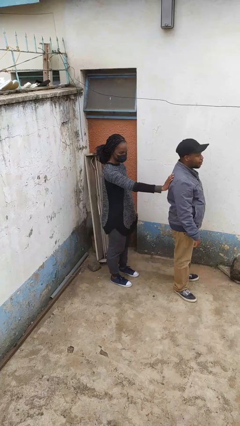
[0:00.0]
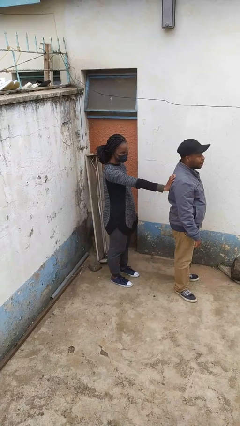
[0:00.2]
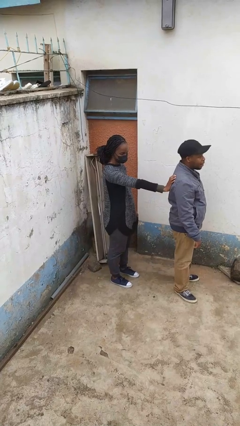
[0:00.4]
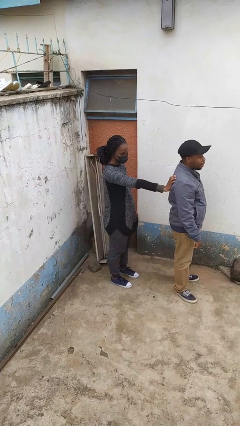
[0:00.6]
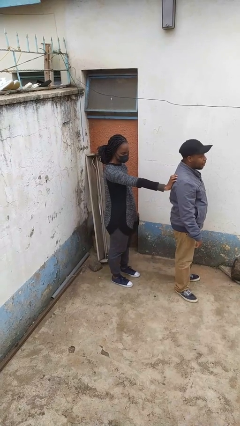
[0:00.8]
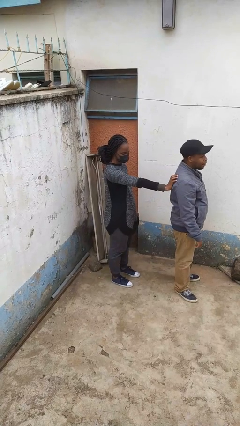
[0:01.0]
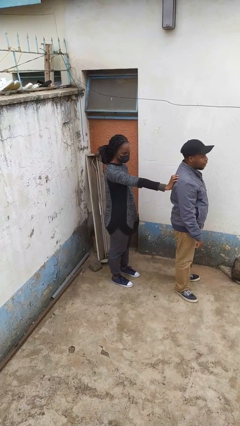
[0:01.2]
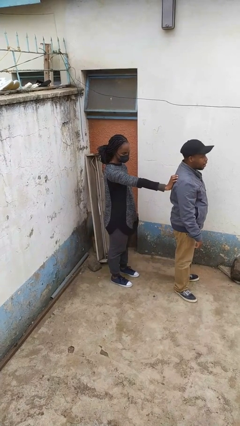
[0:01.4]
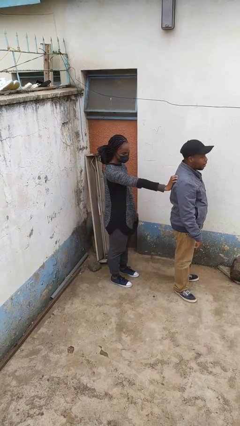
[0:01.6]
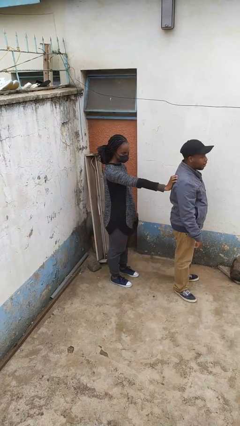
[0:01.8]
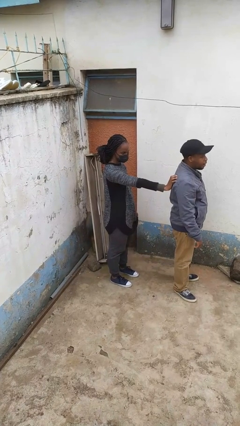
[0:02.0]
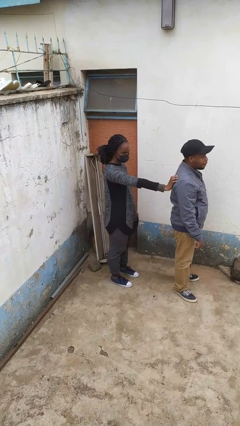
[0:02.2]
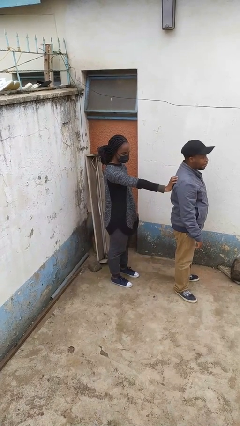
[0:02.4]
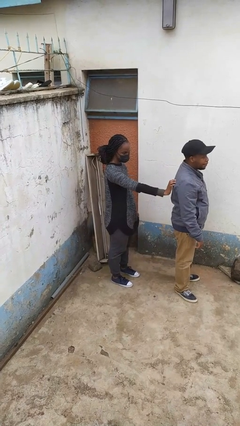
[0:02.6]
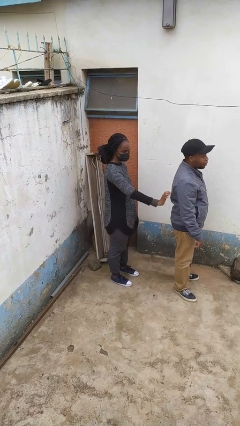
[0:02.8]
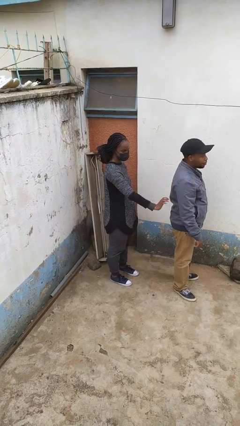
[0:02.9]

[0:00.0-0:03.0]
person touches back of person

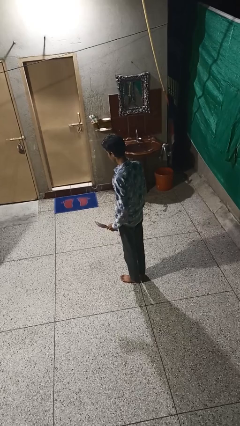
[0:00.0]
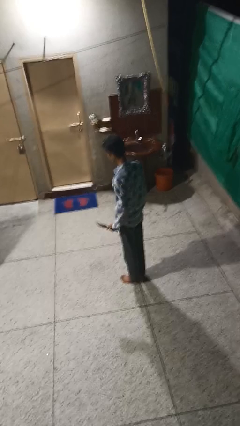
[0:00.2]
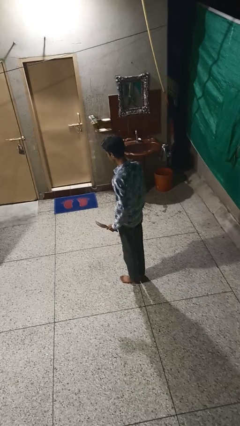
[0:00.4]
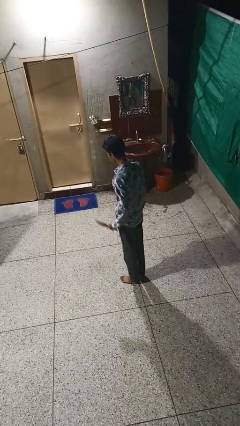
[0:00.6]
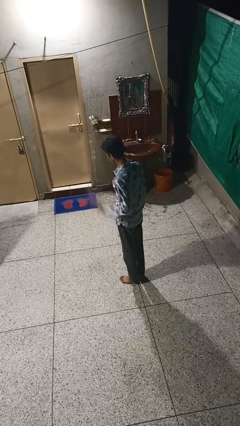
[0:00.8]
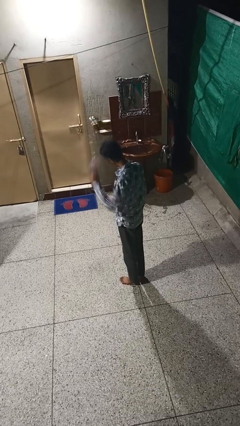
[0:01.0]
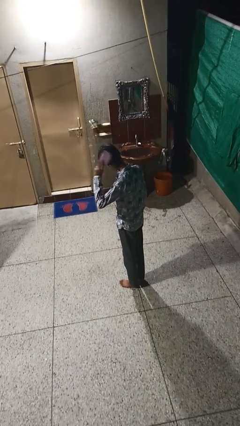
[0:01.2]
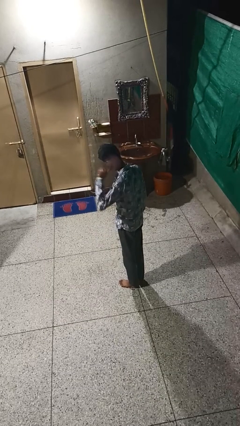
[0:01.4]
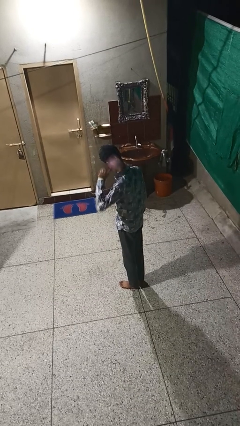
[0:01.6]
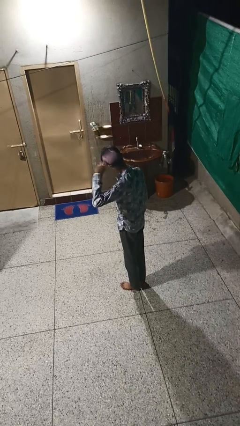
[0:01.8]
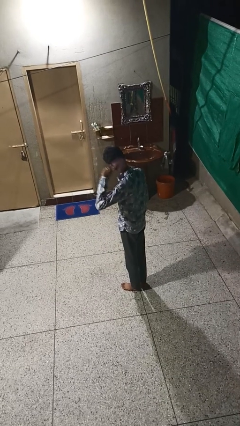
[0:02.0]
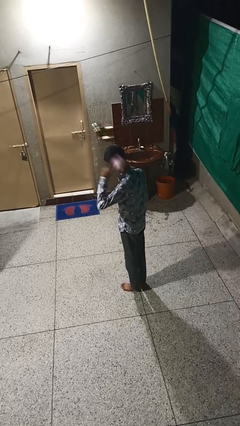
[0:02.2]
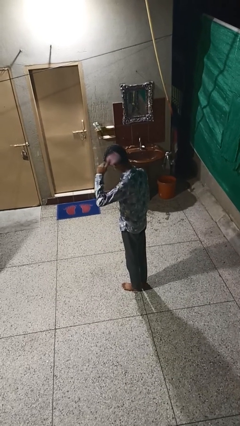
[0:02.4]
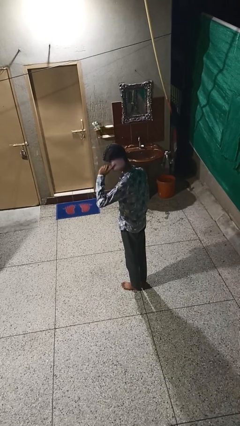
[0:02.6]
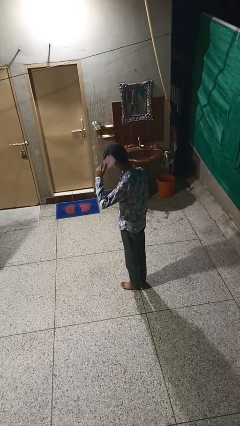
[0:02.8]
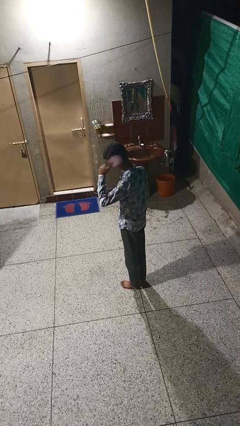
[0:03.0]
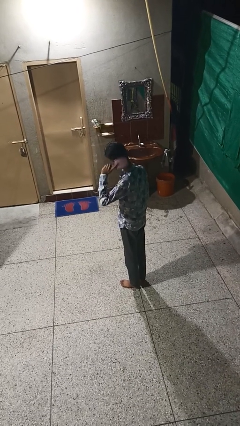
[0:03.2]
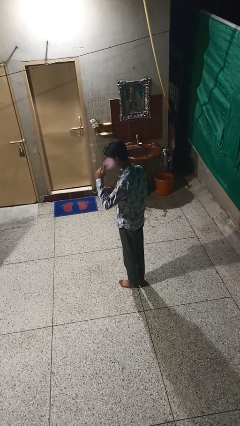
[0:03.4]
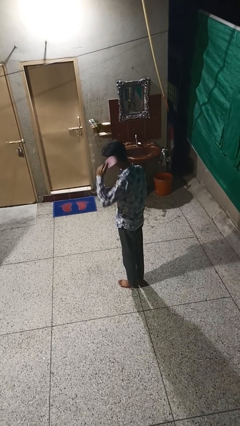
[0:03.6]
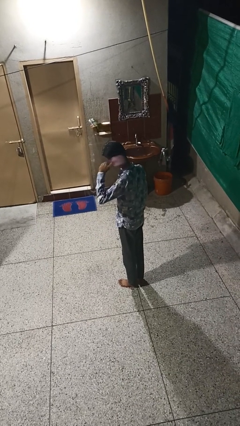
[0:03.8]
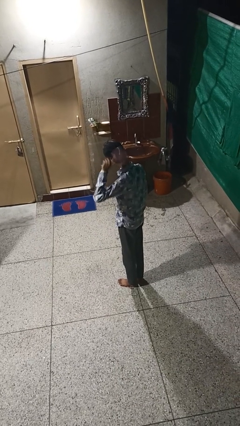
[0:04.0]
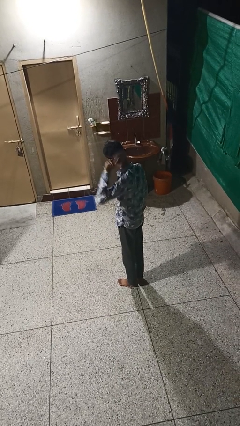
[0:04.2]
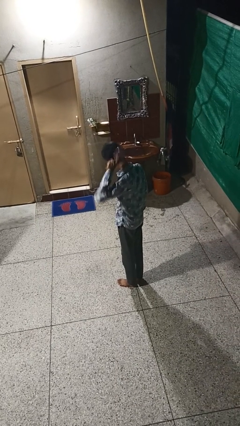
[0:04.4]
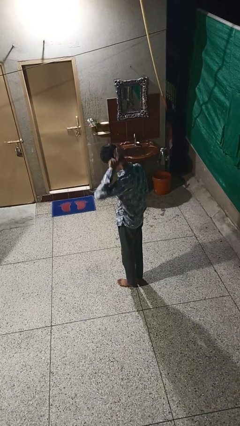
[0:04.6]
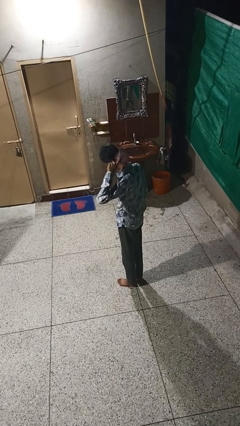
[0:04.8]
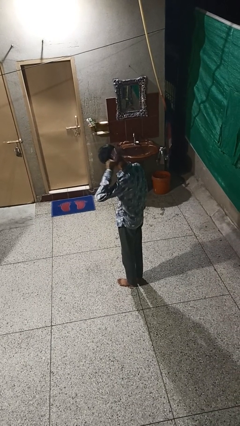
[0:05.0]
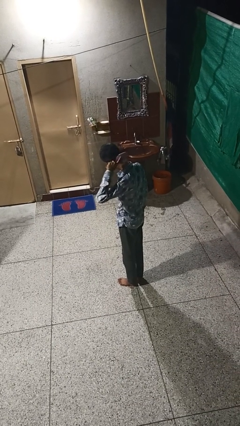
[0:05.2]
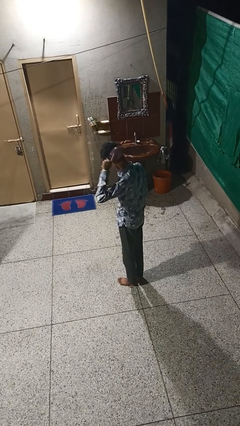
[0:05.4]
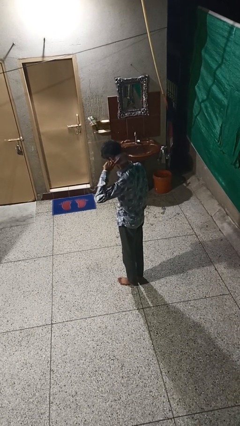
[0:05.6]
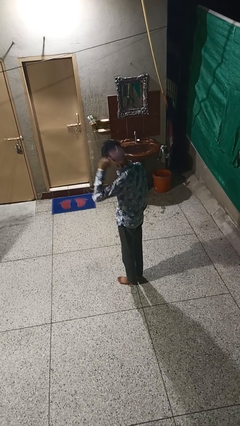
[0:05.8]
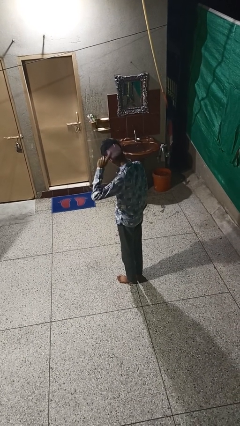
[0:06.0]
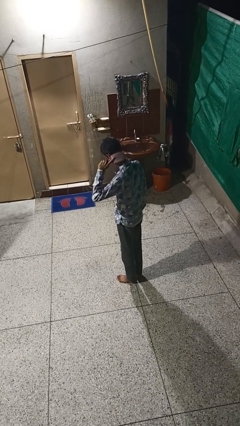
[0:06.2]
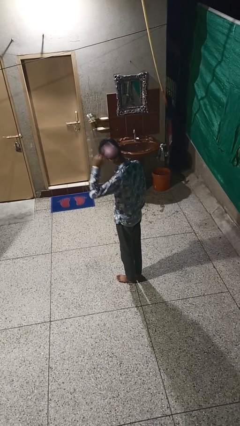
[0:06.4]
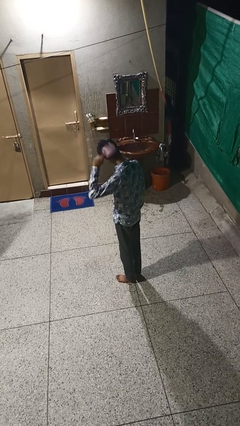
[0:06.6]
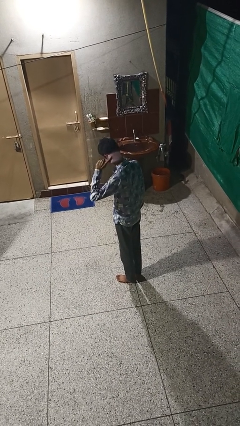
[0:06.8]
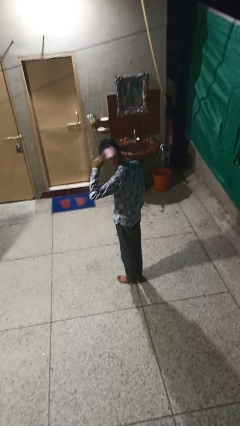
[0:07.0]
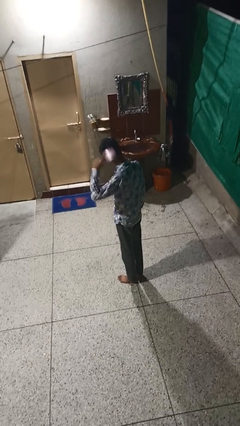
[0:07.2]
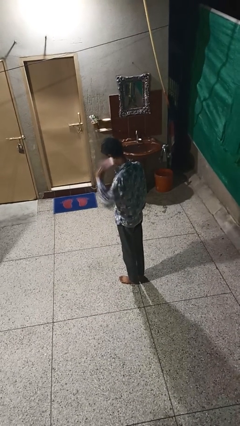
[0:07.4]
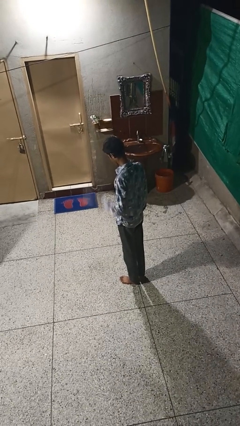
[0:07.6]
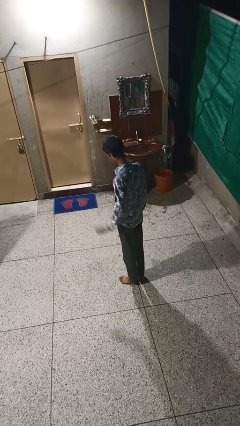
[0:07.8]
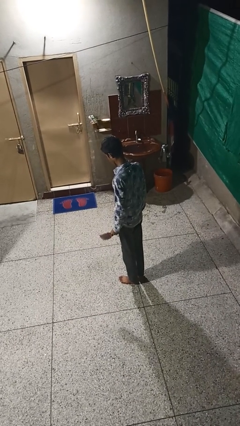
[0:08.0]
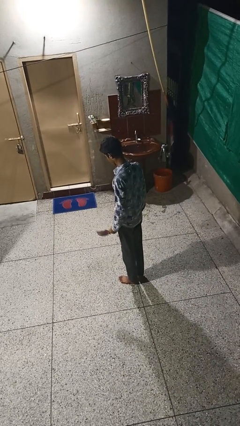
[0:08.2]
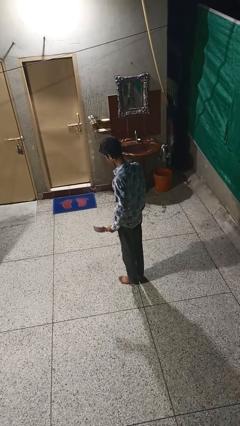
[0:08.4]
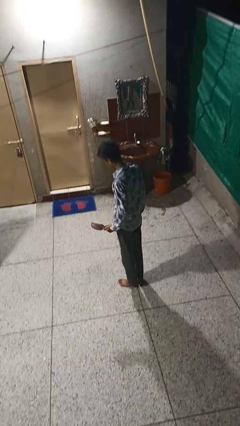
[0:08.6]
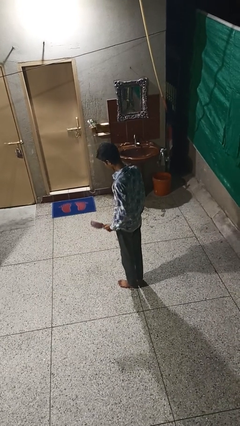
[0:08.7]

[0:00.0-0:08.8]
person puts on wristwatch

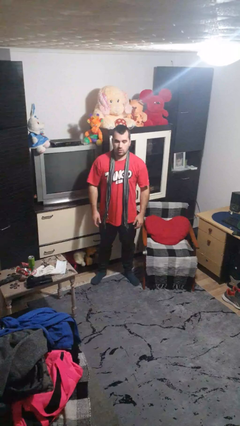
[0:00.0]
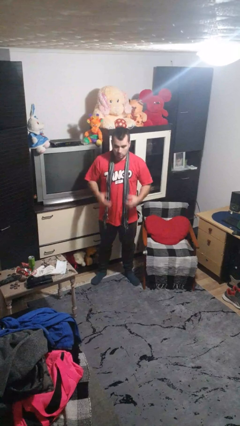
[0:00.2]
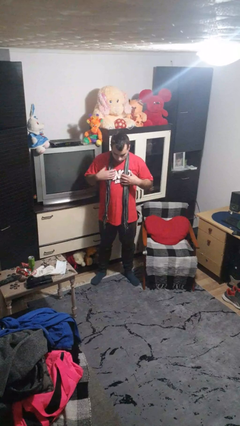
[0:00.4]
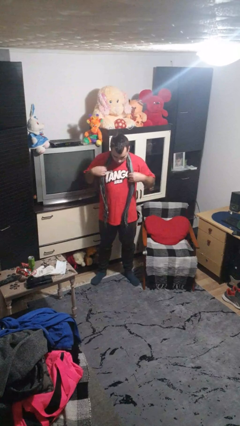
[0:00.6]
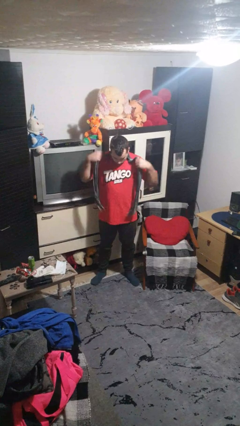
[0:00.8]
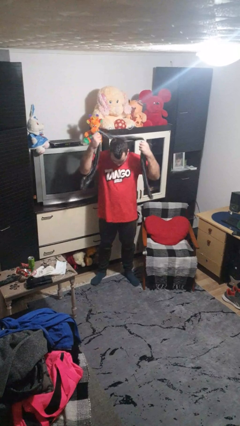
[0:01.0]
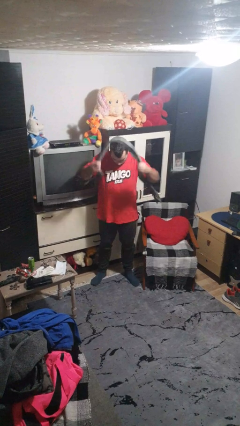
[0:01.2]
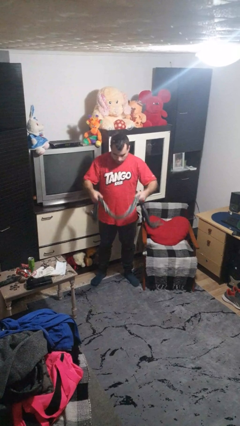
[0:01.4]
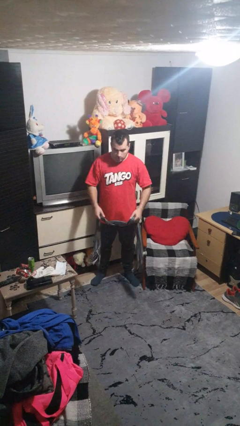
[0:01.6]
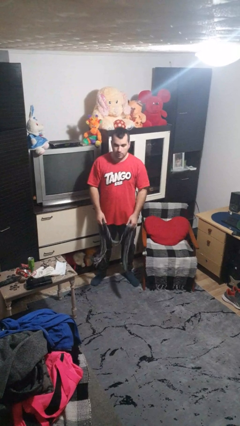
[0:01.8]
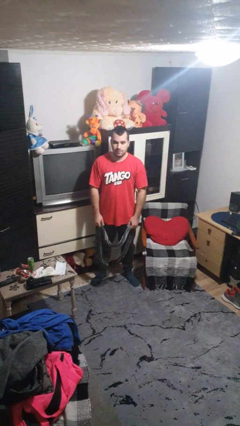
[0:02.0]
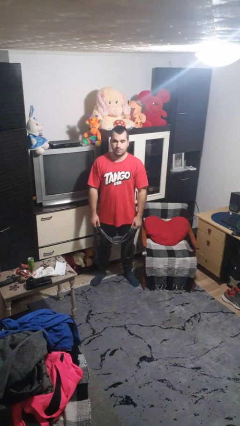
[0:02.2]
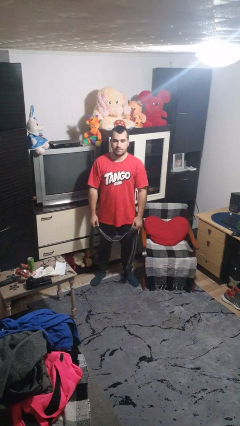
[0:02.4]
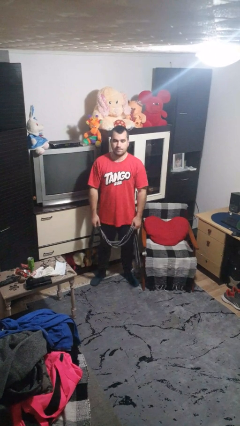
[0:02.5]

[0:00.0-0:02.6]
person takes off scarf

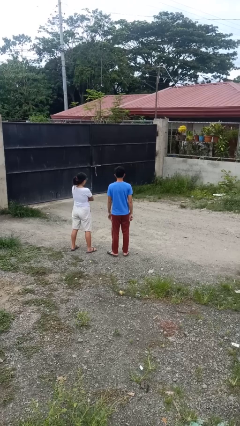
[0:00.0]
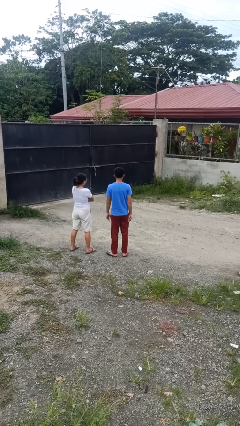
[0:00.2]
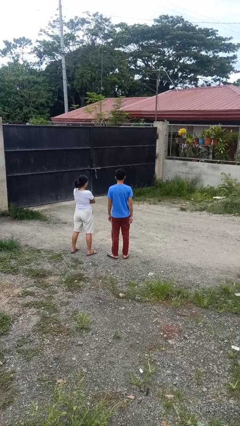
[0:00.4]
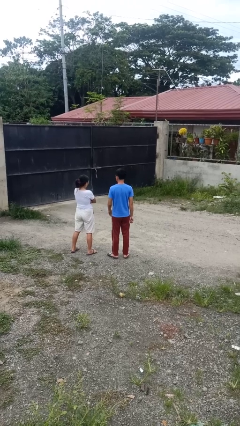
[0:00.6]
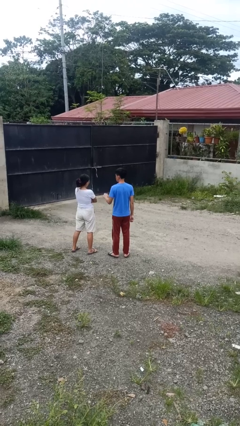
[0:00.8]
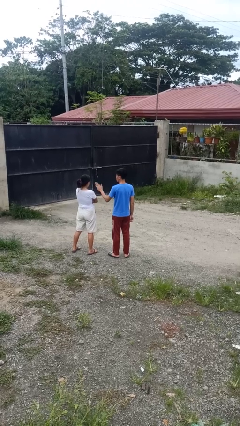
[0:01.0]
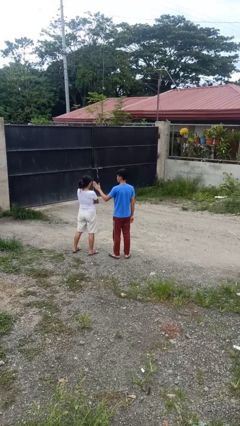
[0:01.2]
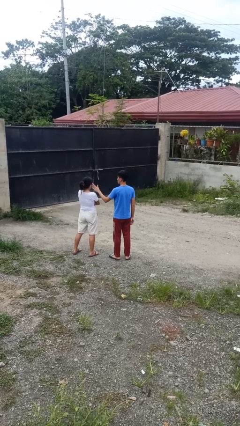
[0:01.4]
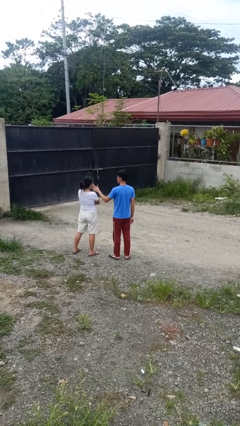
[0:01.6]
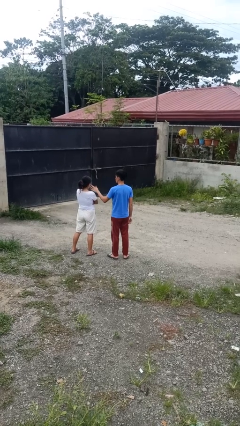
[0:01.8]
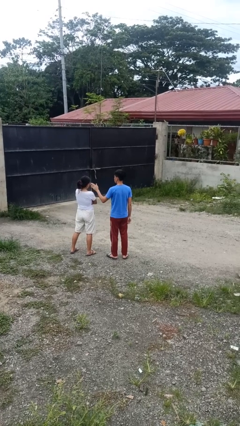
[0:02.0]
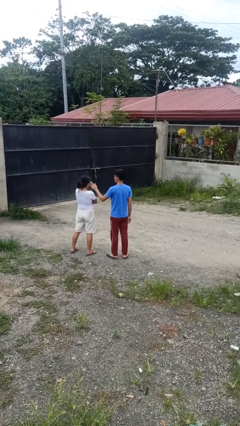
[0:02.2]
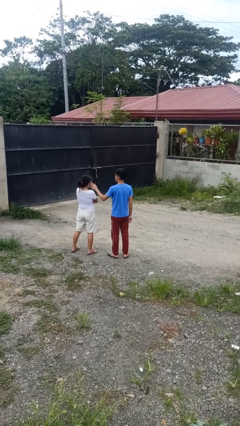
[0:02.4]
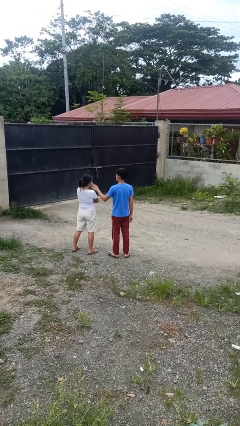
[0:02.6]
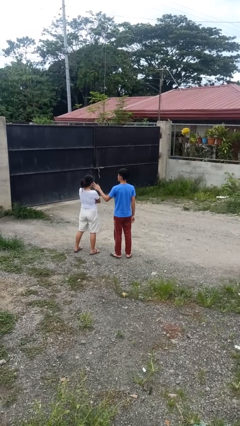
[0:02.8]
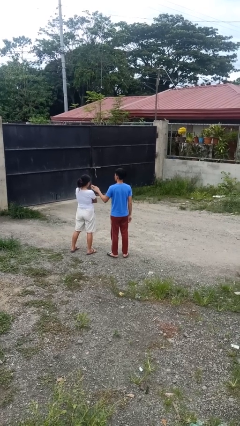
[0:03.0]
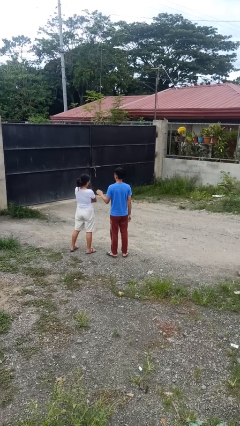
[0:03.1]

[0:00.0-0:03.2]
person touches face of person
